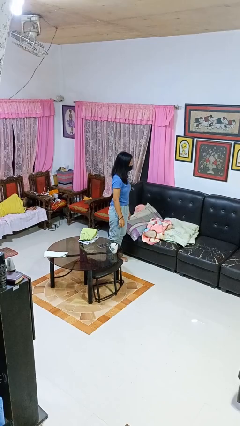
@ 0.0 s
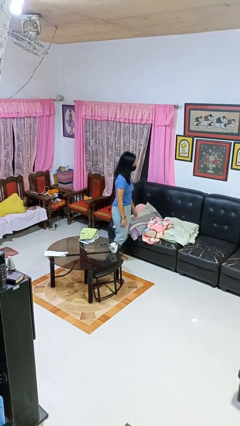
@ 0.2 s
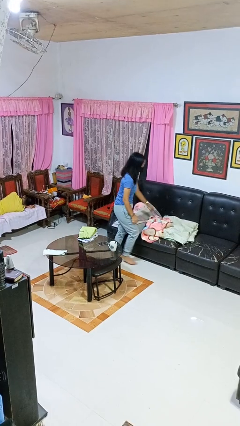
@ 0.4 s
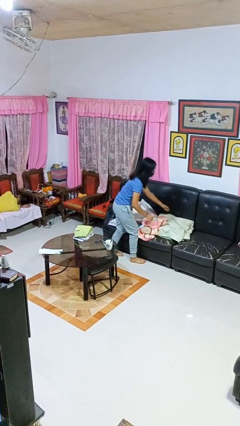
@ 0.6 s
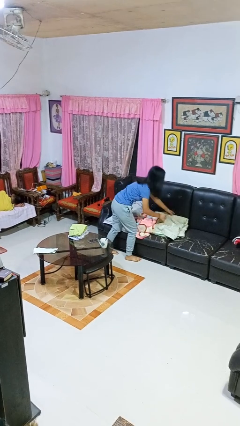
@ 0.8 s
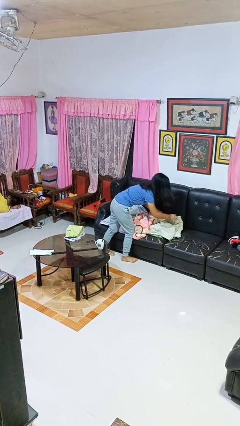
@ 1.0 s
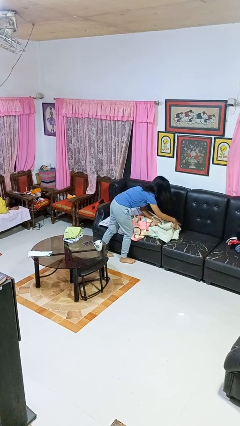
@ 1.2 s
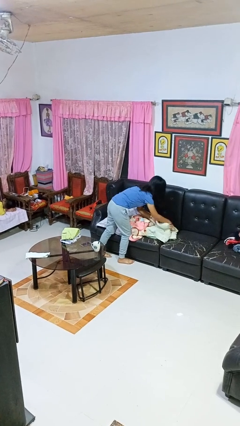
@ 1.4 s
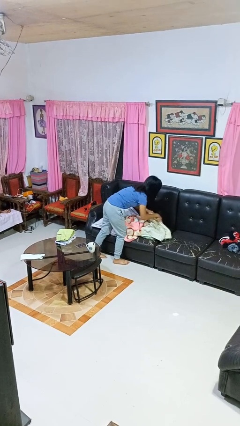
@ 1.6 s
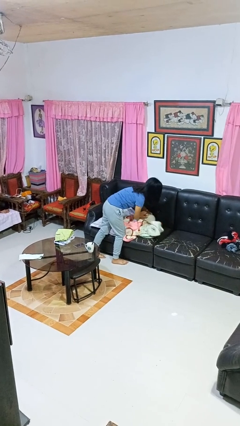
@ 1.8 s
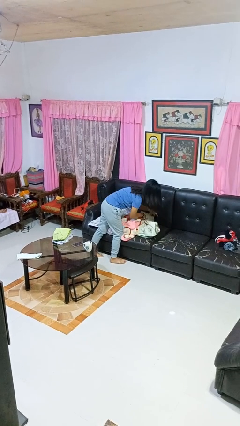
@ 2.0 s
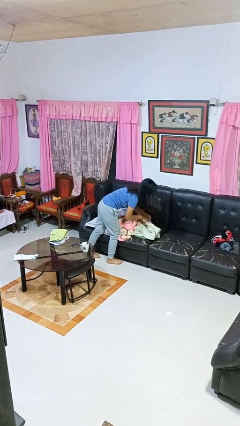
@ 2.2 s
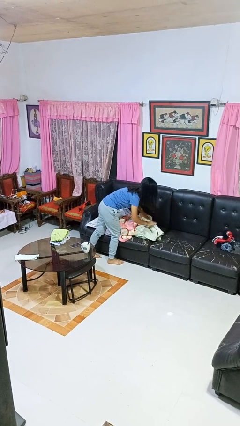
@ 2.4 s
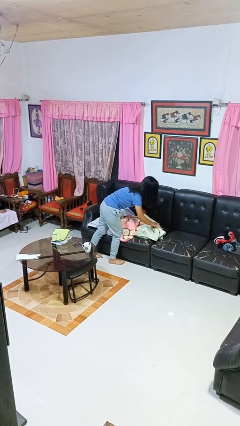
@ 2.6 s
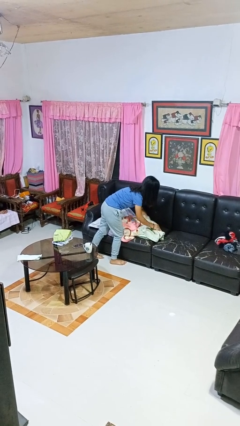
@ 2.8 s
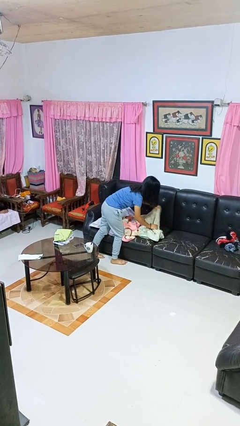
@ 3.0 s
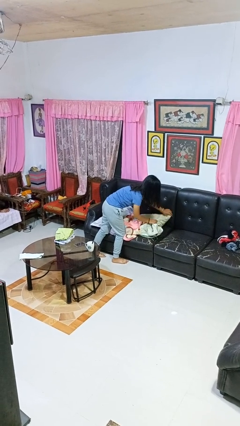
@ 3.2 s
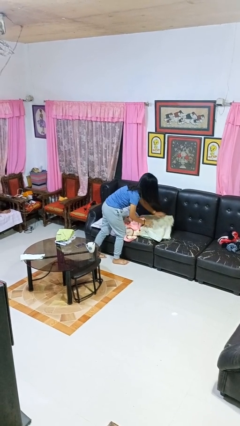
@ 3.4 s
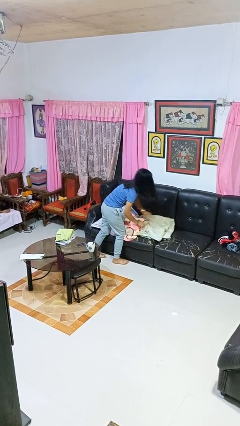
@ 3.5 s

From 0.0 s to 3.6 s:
person searches in couch

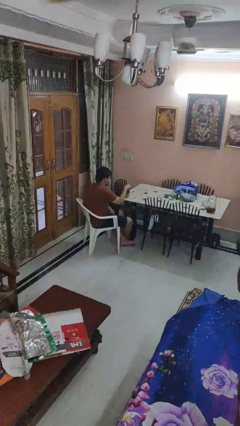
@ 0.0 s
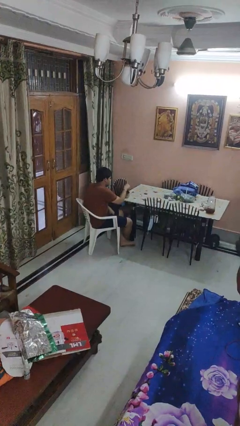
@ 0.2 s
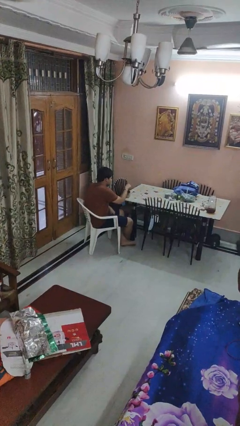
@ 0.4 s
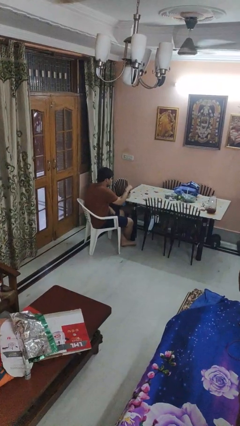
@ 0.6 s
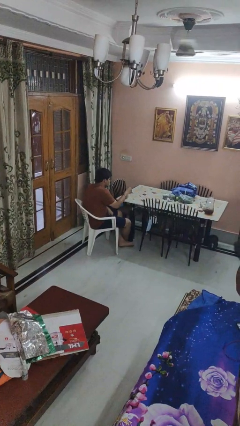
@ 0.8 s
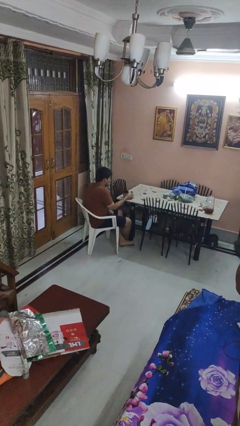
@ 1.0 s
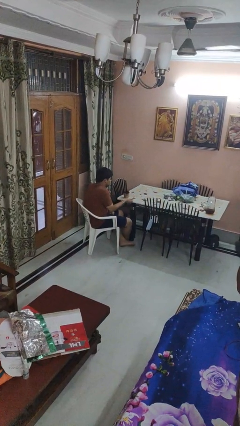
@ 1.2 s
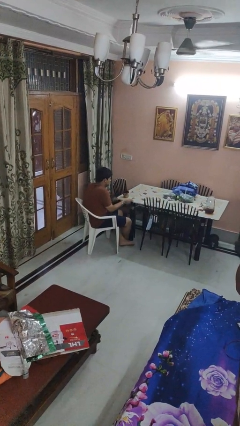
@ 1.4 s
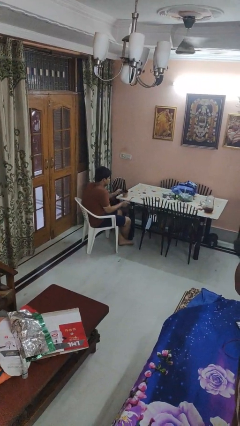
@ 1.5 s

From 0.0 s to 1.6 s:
person stirs mug

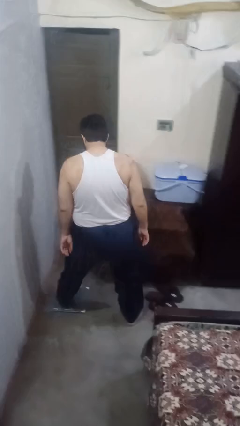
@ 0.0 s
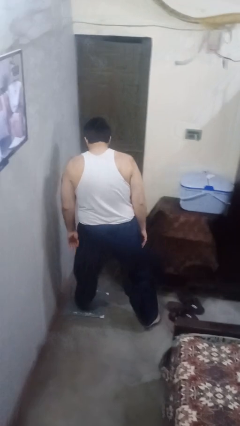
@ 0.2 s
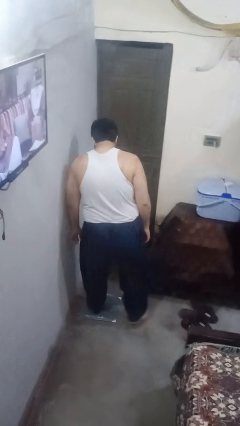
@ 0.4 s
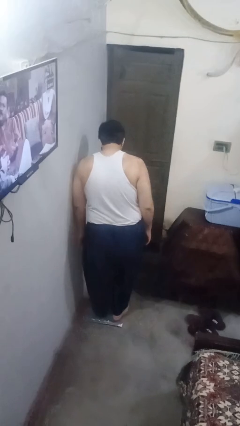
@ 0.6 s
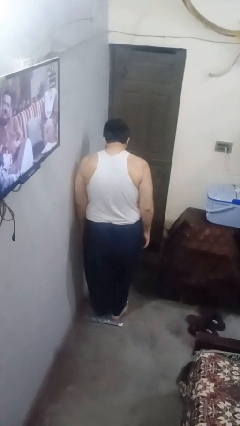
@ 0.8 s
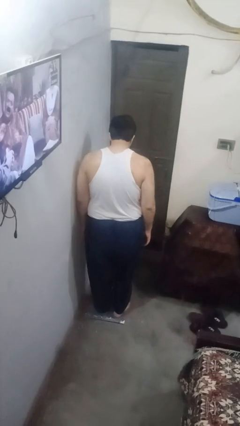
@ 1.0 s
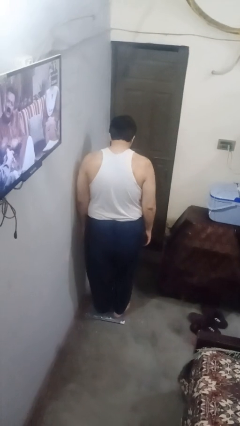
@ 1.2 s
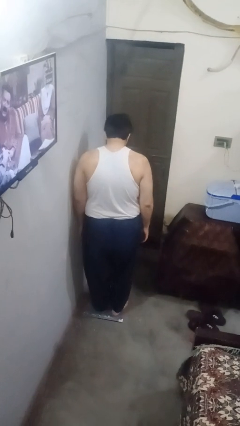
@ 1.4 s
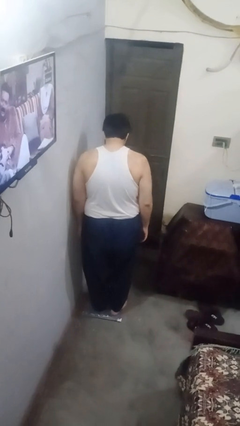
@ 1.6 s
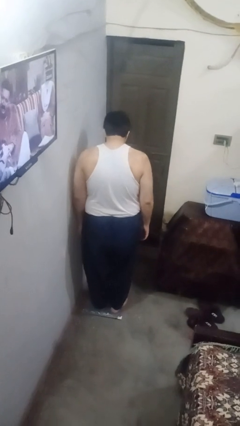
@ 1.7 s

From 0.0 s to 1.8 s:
person uses bodyweight scale

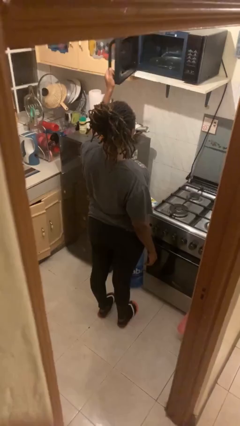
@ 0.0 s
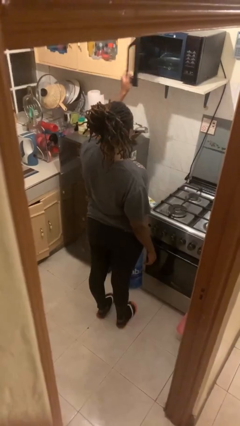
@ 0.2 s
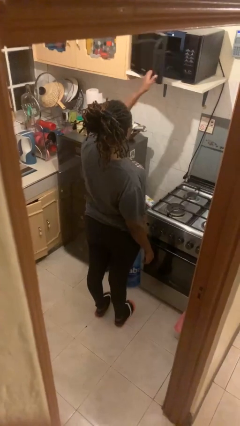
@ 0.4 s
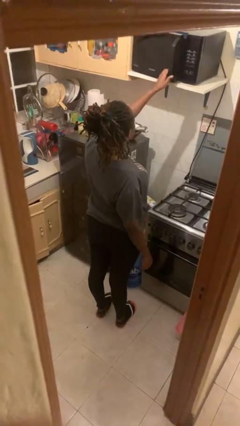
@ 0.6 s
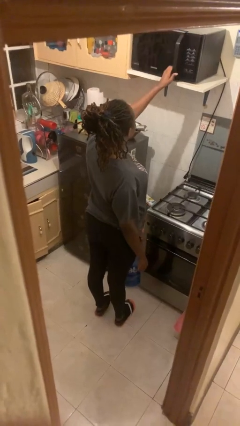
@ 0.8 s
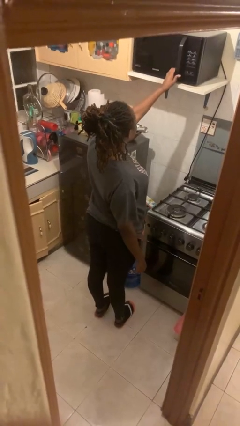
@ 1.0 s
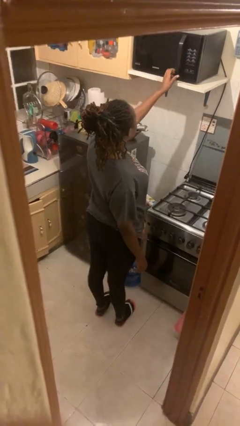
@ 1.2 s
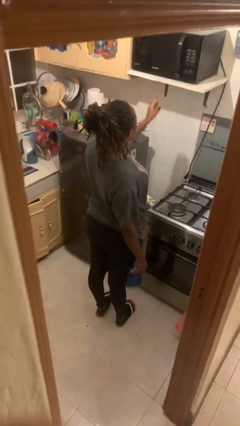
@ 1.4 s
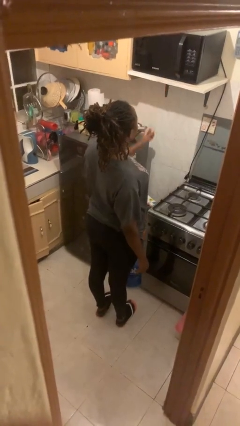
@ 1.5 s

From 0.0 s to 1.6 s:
person closes microwave

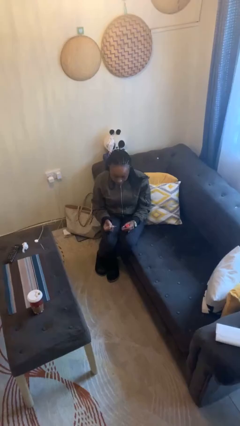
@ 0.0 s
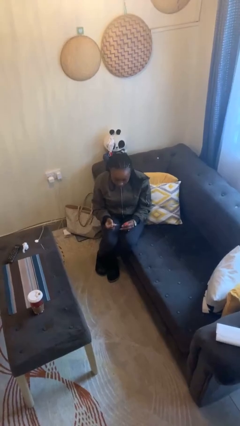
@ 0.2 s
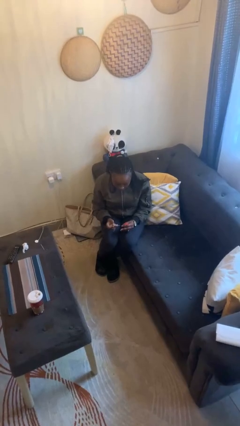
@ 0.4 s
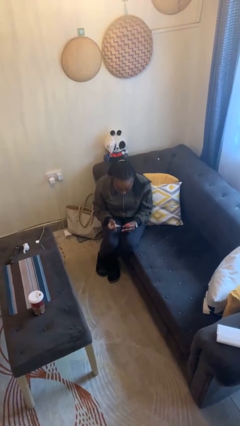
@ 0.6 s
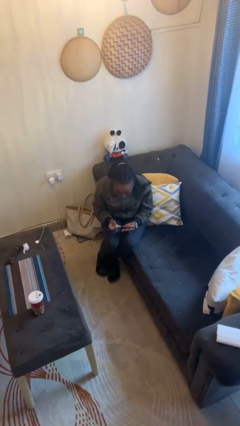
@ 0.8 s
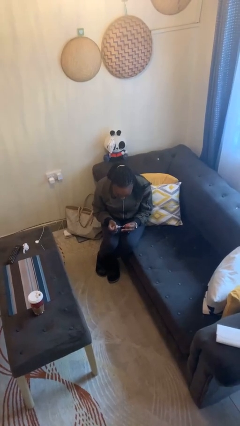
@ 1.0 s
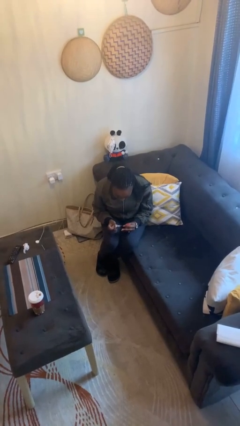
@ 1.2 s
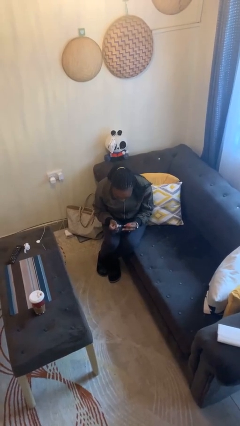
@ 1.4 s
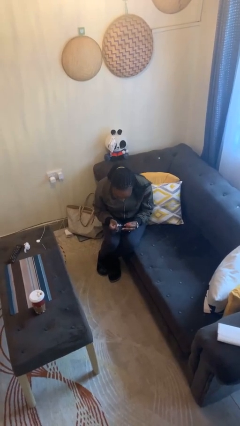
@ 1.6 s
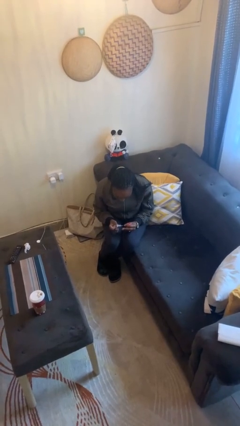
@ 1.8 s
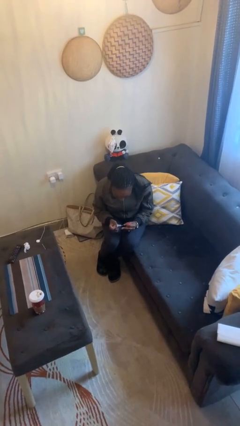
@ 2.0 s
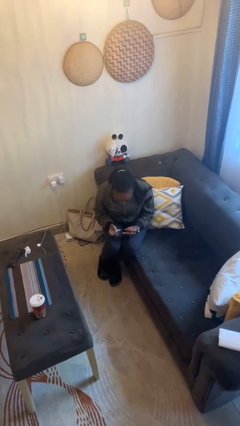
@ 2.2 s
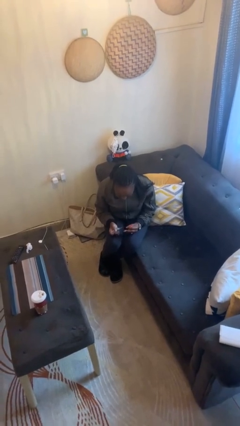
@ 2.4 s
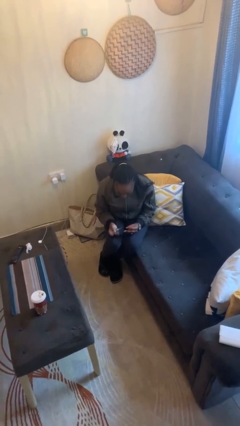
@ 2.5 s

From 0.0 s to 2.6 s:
person paints fingernails

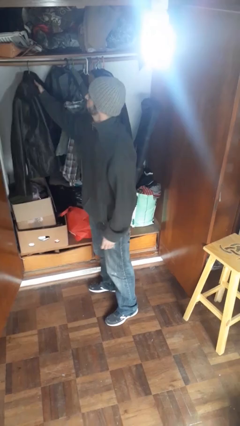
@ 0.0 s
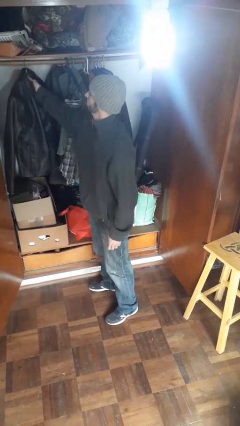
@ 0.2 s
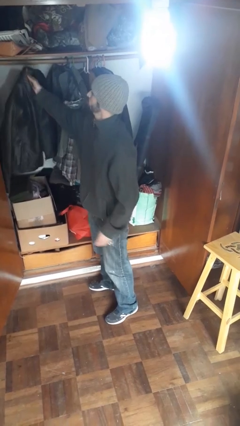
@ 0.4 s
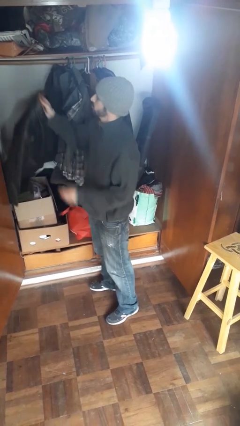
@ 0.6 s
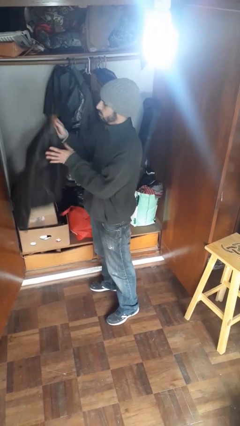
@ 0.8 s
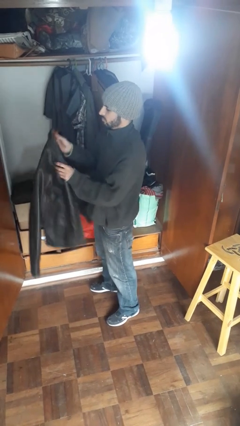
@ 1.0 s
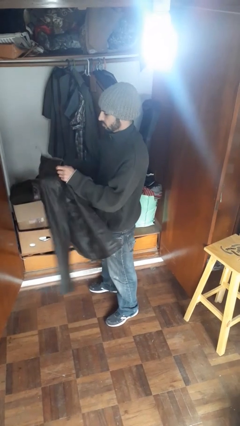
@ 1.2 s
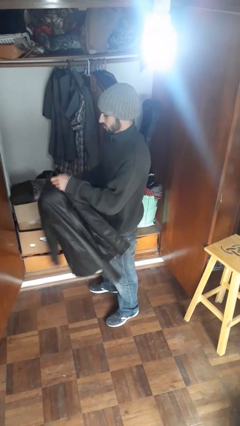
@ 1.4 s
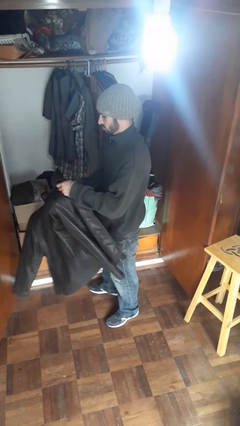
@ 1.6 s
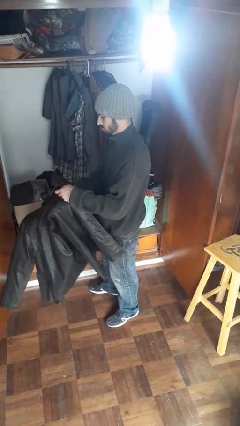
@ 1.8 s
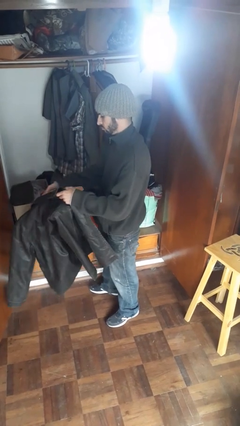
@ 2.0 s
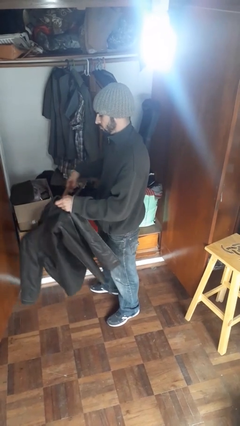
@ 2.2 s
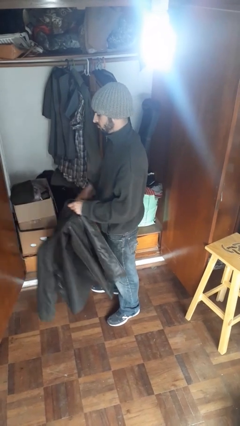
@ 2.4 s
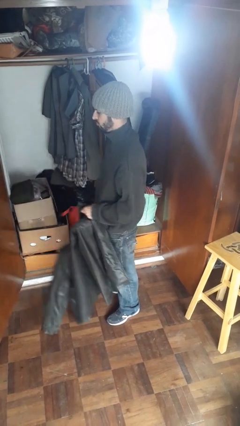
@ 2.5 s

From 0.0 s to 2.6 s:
person takes clothes from closet

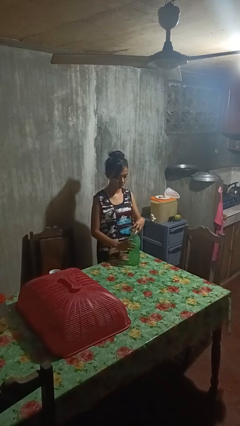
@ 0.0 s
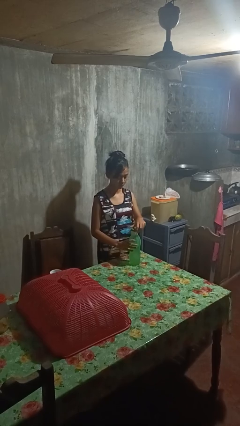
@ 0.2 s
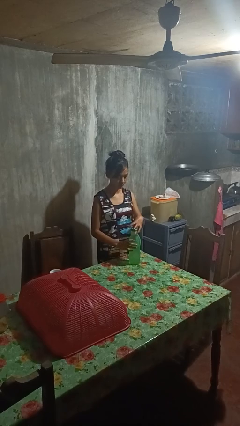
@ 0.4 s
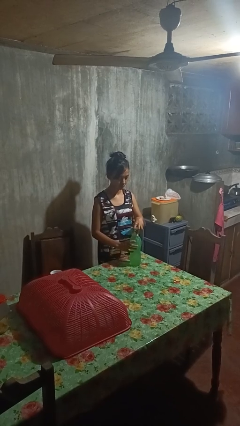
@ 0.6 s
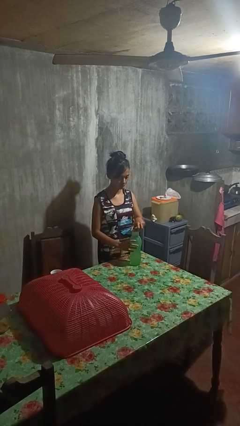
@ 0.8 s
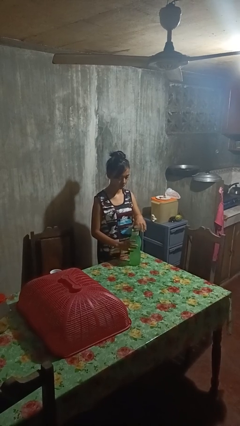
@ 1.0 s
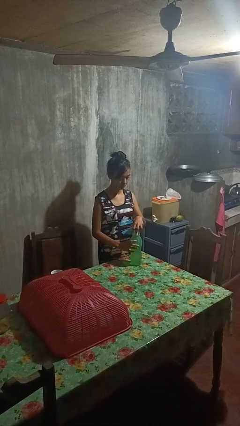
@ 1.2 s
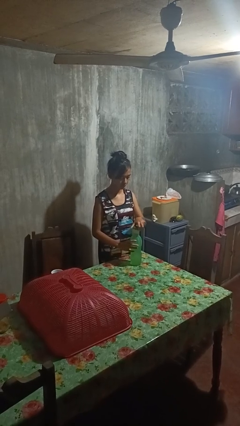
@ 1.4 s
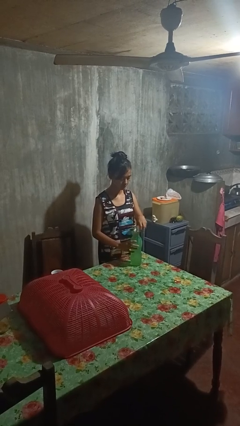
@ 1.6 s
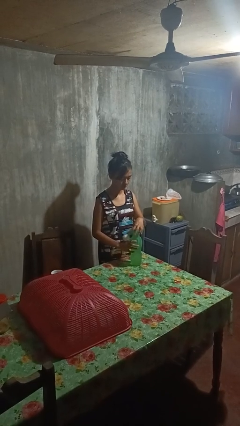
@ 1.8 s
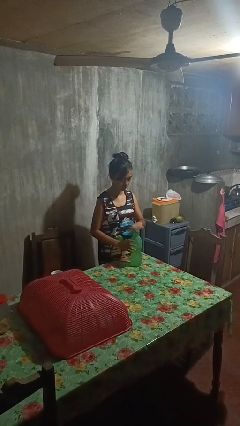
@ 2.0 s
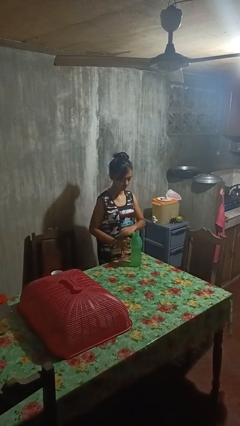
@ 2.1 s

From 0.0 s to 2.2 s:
person unscrews lid from bottle

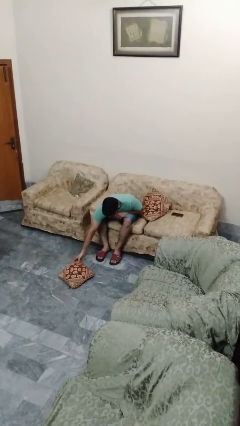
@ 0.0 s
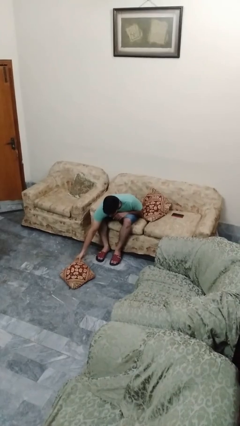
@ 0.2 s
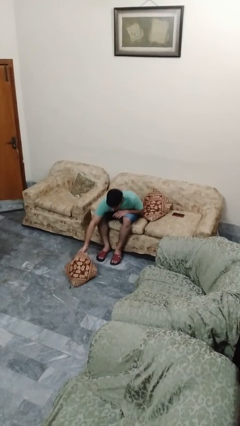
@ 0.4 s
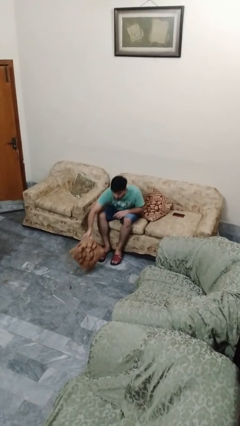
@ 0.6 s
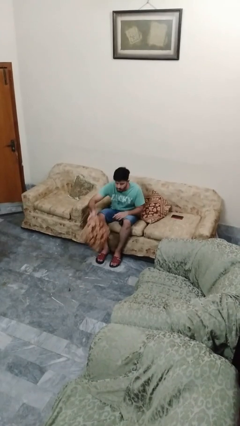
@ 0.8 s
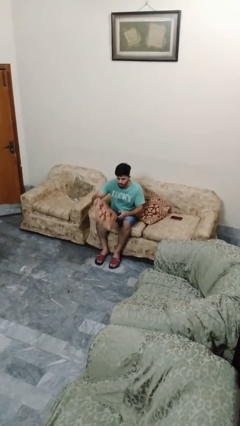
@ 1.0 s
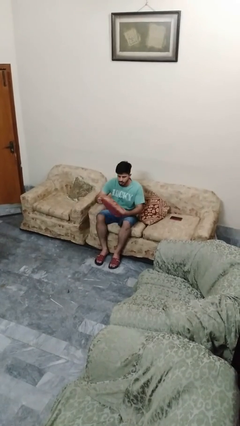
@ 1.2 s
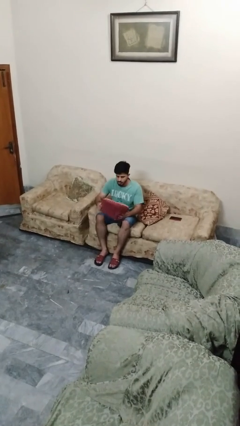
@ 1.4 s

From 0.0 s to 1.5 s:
person picks up object from floor
